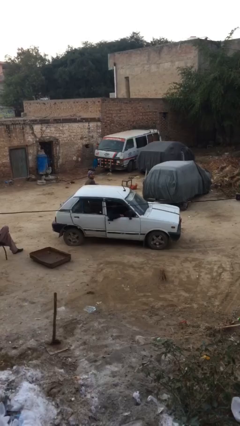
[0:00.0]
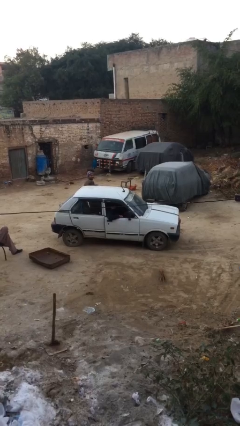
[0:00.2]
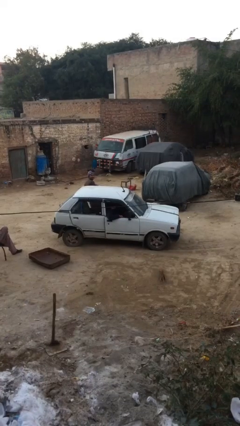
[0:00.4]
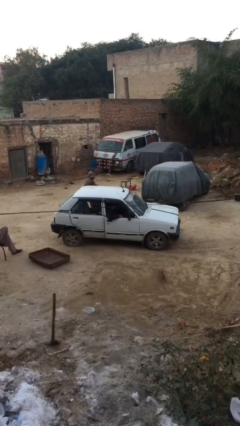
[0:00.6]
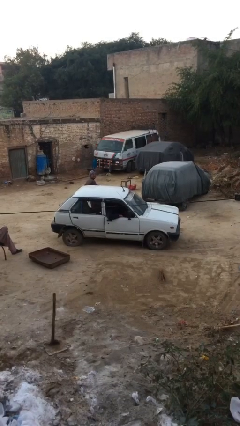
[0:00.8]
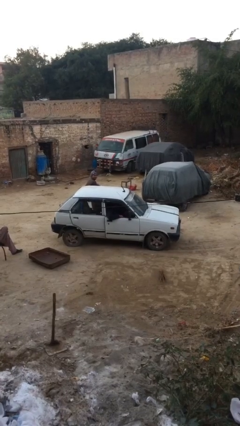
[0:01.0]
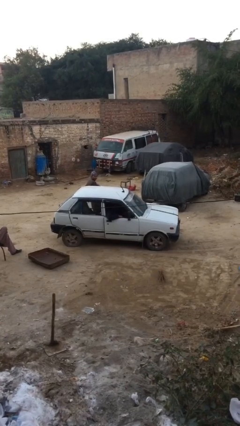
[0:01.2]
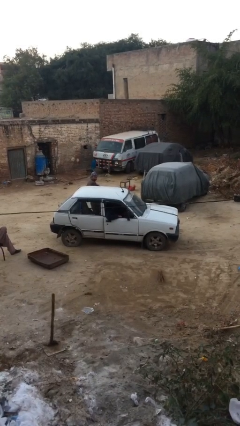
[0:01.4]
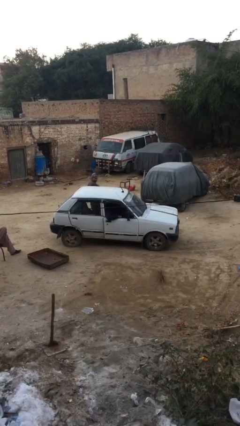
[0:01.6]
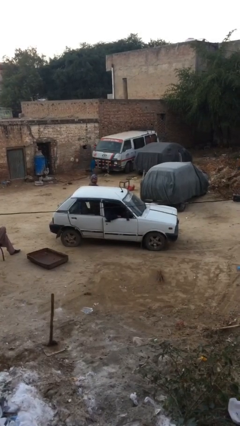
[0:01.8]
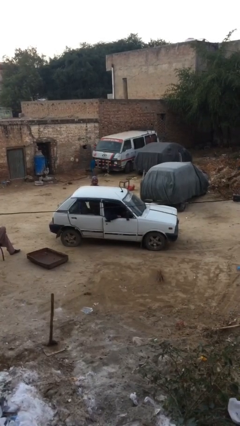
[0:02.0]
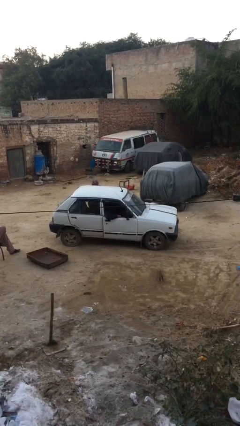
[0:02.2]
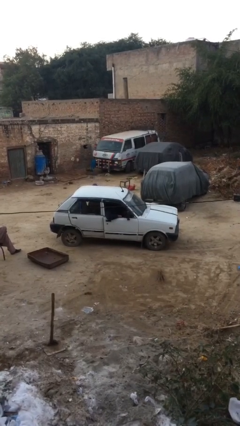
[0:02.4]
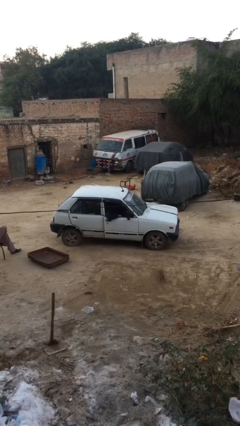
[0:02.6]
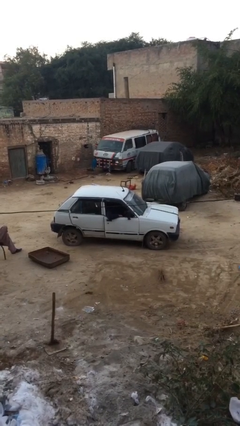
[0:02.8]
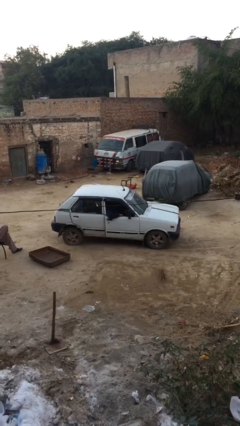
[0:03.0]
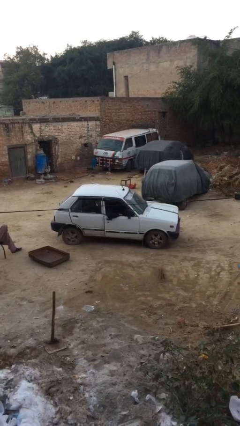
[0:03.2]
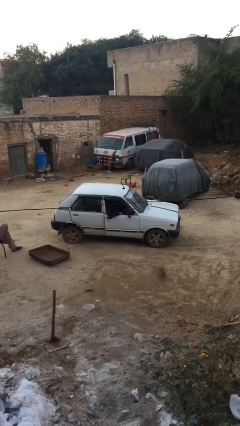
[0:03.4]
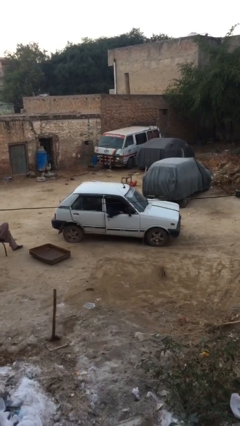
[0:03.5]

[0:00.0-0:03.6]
car picks up person

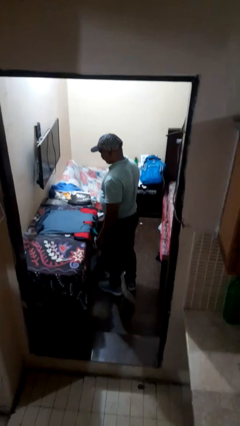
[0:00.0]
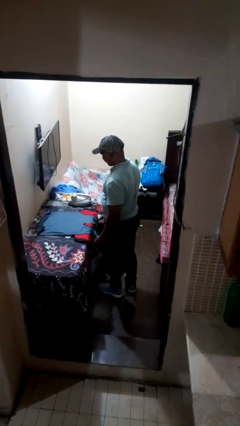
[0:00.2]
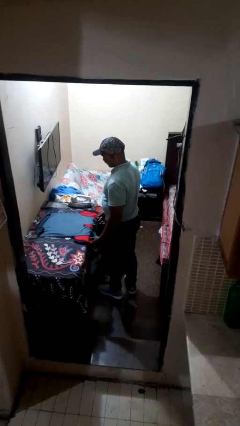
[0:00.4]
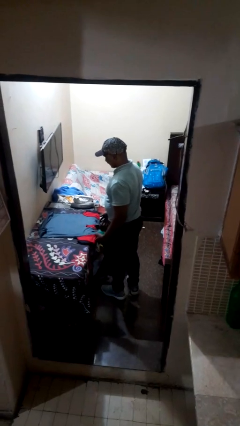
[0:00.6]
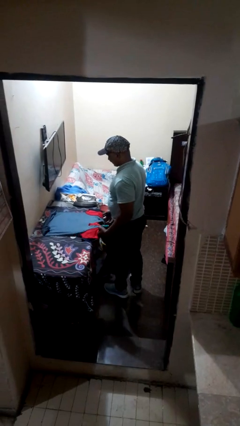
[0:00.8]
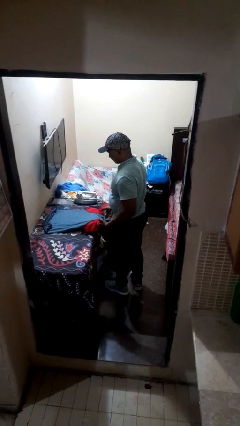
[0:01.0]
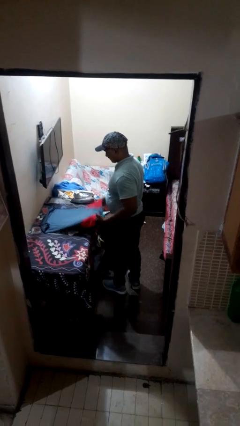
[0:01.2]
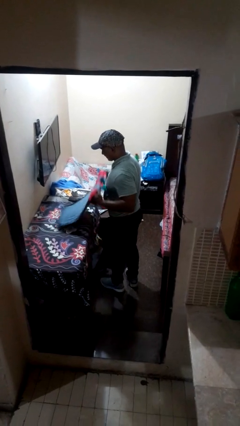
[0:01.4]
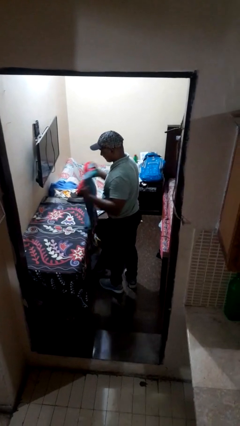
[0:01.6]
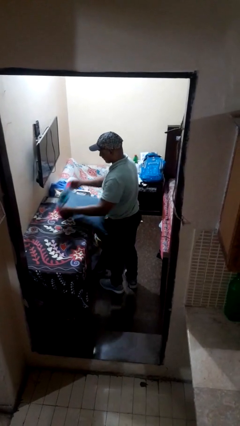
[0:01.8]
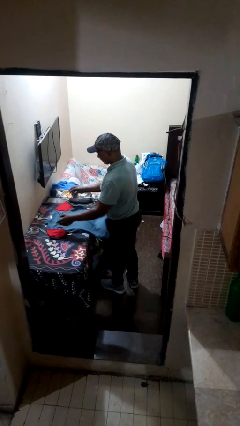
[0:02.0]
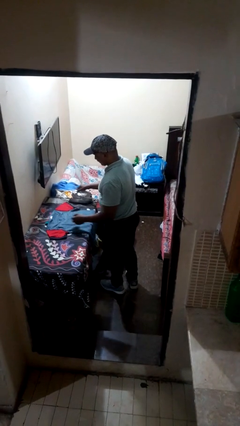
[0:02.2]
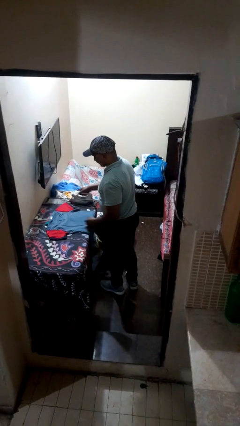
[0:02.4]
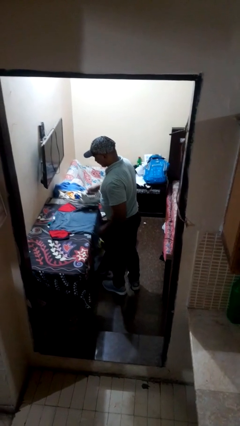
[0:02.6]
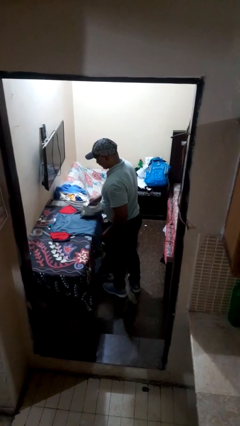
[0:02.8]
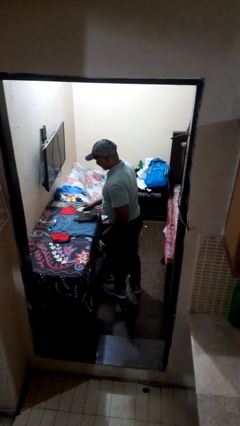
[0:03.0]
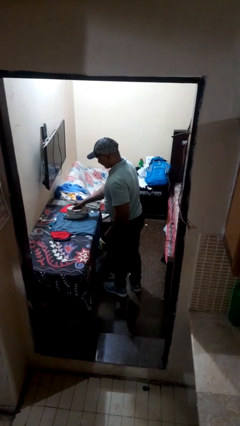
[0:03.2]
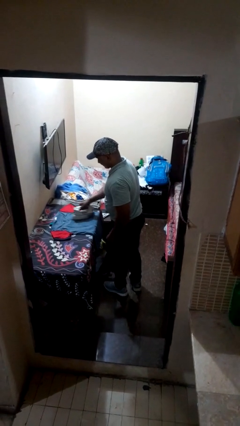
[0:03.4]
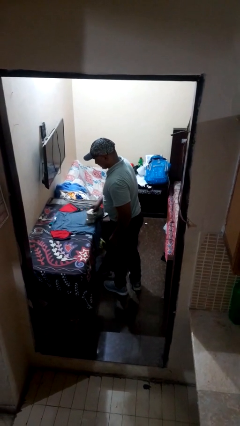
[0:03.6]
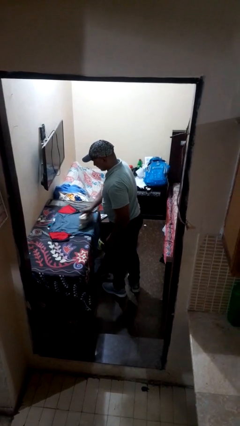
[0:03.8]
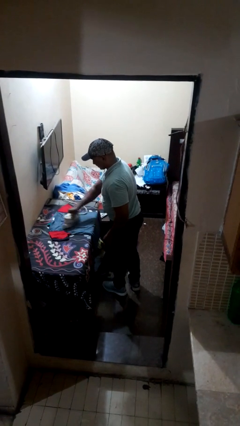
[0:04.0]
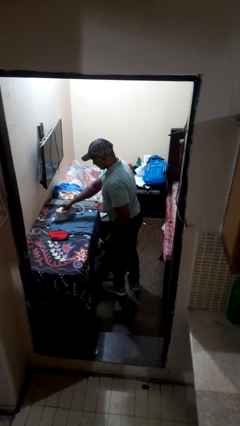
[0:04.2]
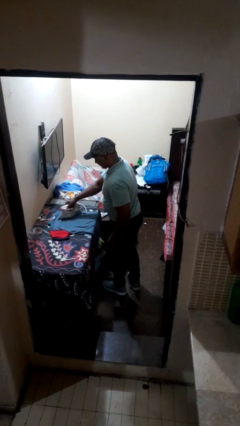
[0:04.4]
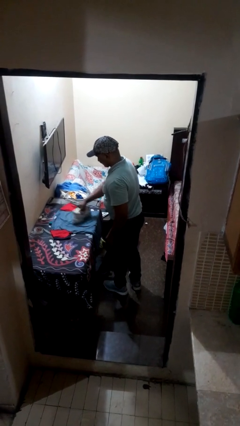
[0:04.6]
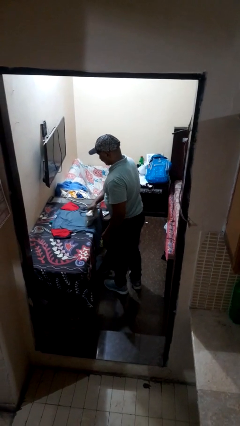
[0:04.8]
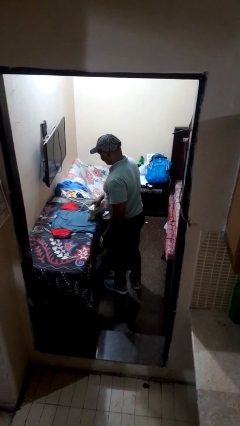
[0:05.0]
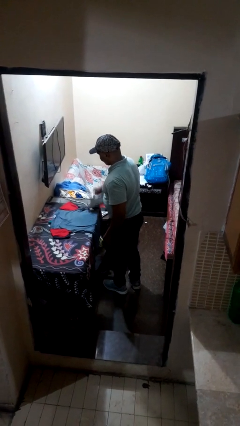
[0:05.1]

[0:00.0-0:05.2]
person irons clothes

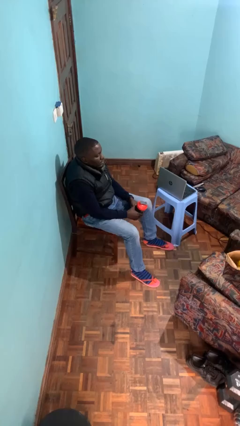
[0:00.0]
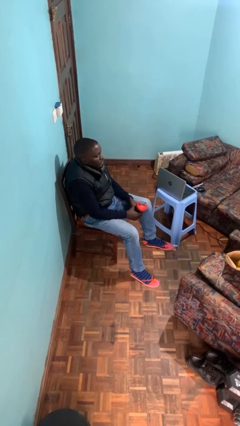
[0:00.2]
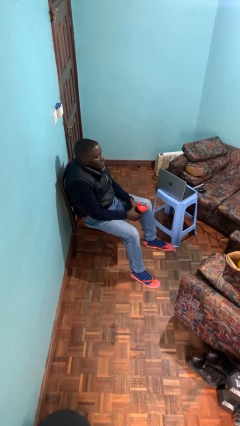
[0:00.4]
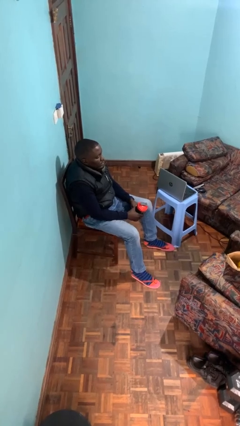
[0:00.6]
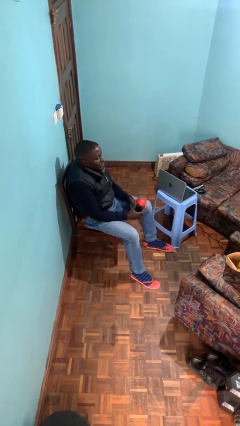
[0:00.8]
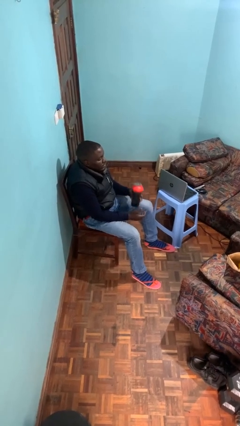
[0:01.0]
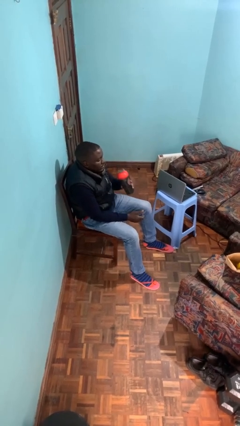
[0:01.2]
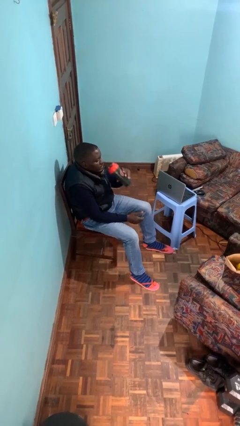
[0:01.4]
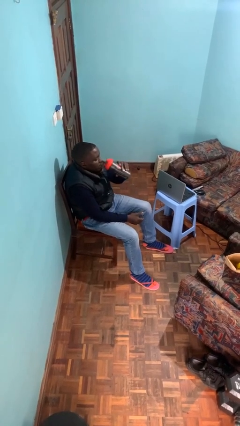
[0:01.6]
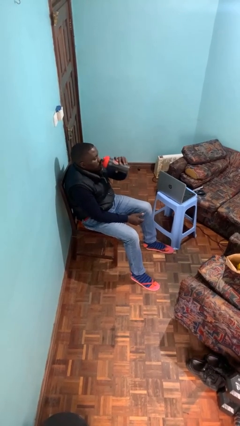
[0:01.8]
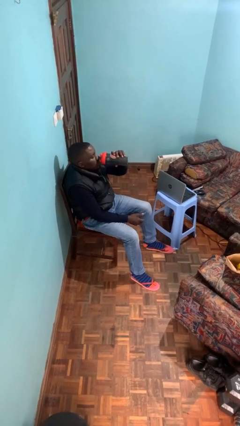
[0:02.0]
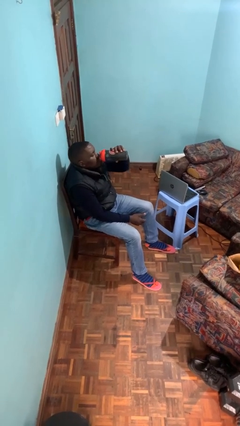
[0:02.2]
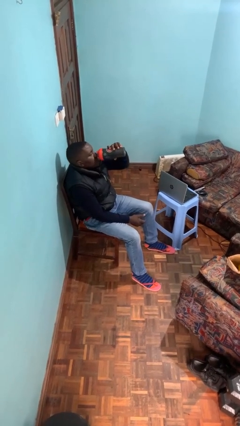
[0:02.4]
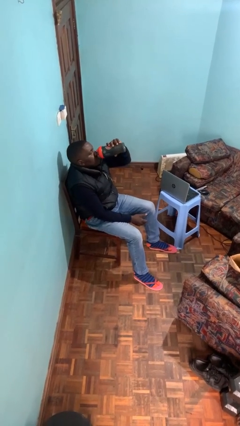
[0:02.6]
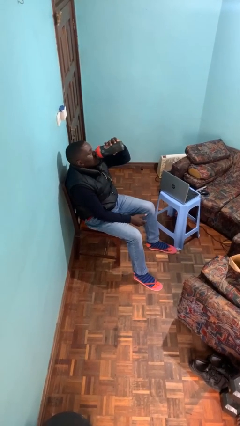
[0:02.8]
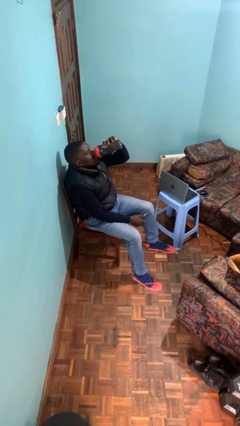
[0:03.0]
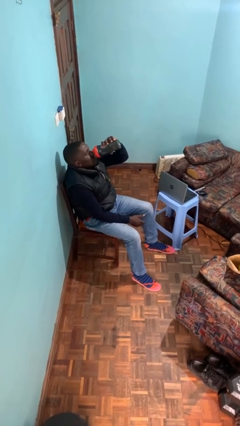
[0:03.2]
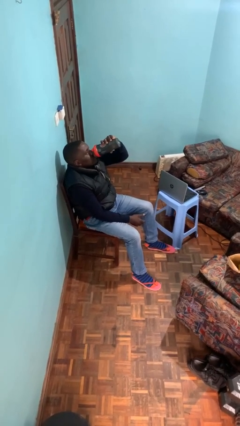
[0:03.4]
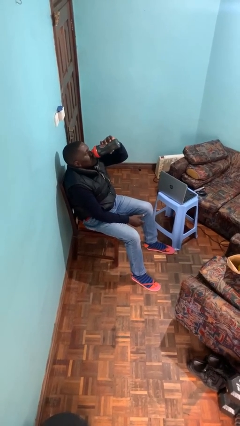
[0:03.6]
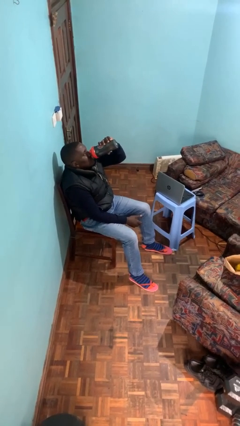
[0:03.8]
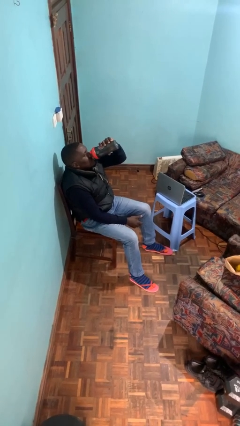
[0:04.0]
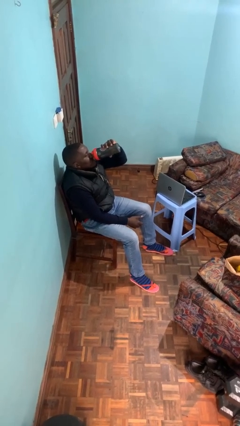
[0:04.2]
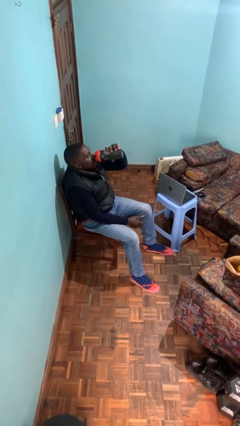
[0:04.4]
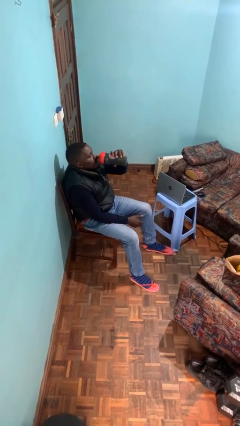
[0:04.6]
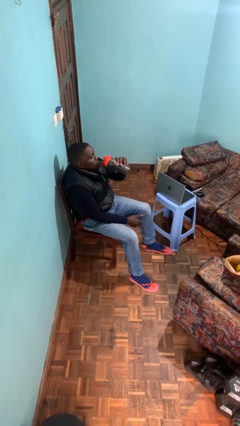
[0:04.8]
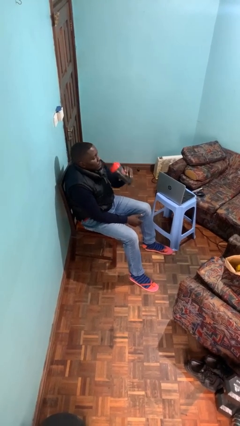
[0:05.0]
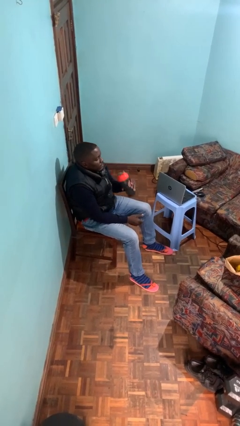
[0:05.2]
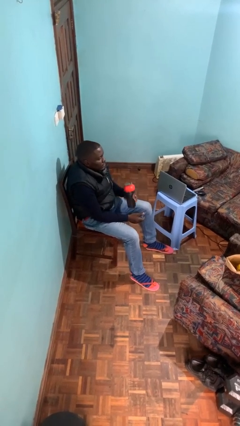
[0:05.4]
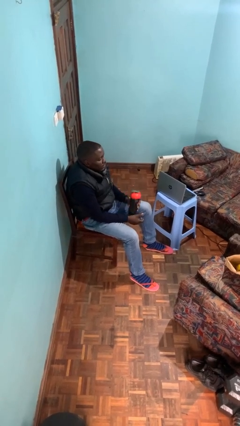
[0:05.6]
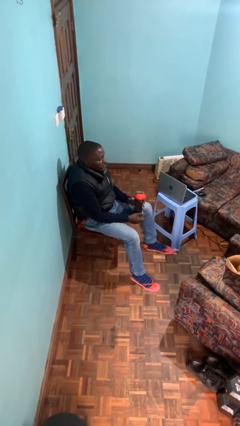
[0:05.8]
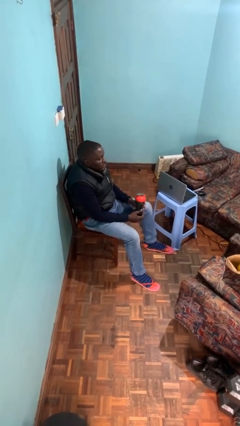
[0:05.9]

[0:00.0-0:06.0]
person drinks from bottle

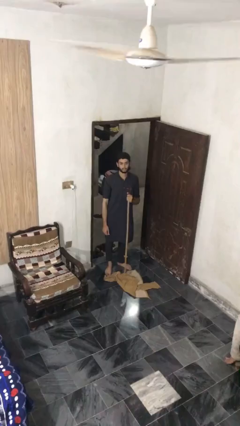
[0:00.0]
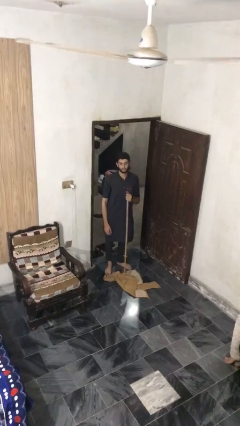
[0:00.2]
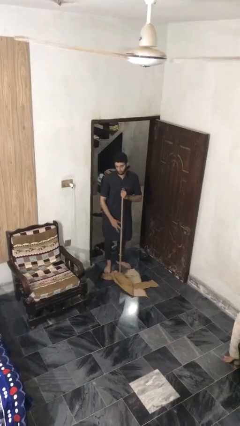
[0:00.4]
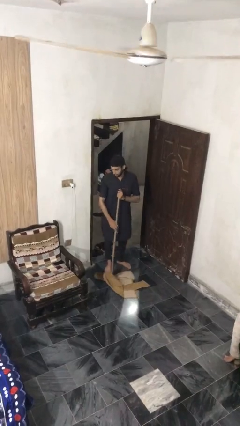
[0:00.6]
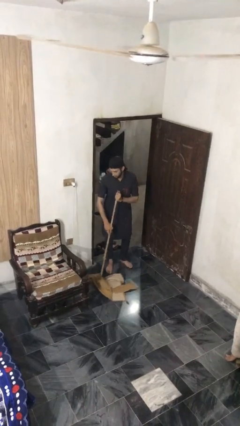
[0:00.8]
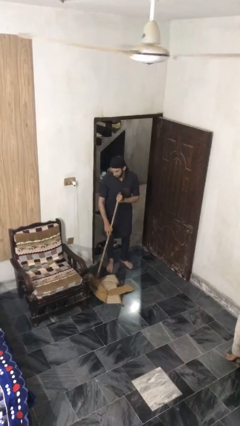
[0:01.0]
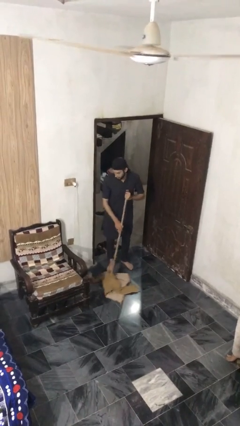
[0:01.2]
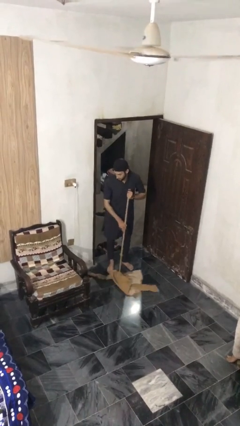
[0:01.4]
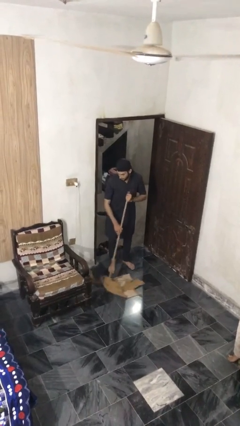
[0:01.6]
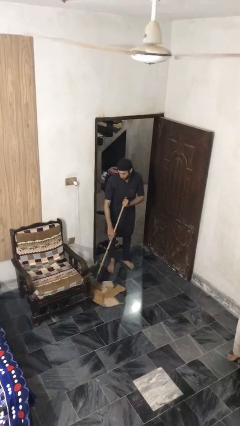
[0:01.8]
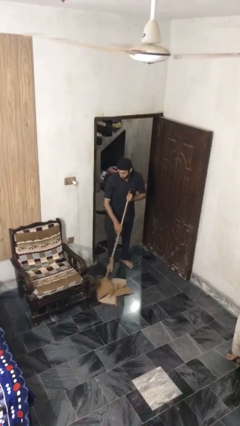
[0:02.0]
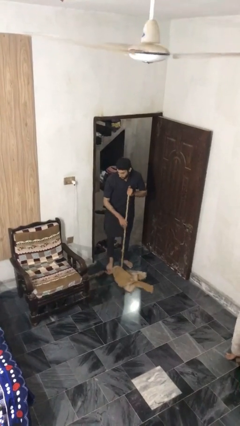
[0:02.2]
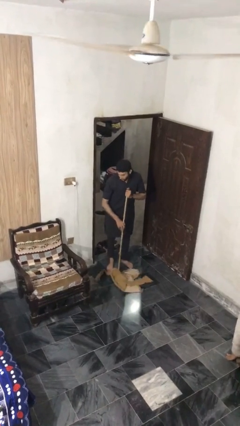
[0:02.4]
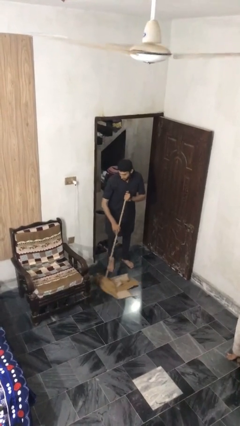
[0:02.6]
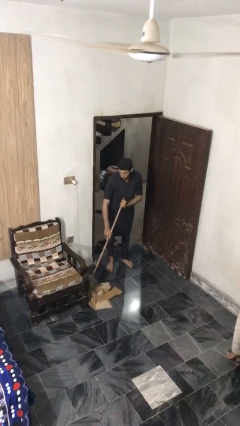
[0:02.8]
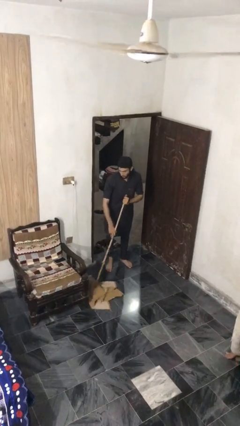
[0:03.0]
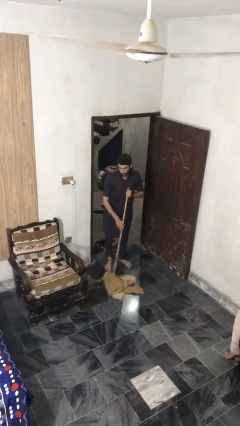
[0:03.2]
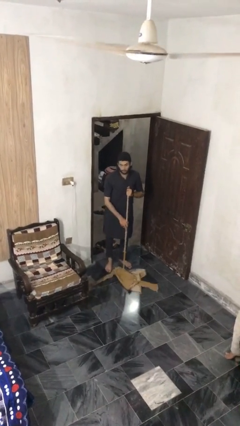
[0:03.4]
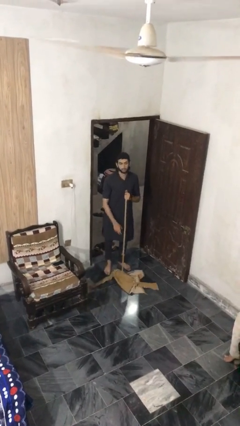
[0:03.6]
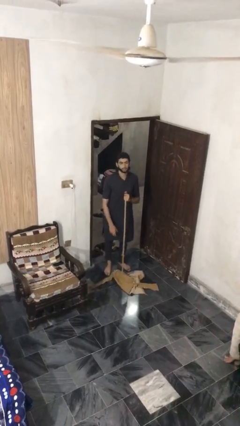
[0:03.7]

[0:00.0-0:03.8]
person mops
